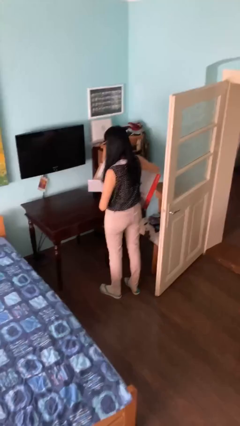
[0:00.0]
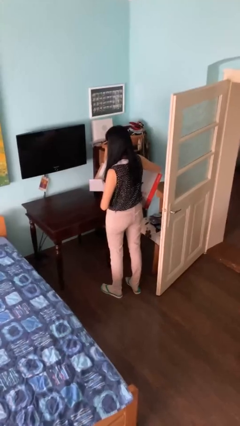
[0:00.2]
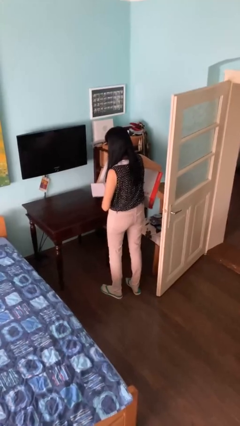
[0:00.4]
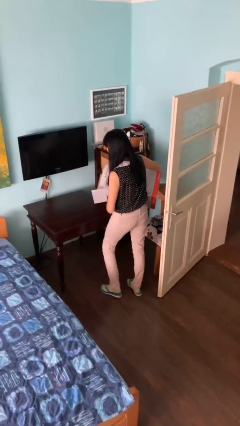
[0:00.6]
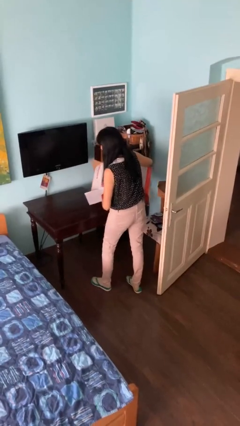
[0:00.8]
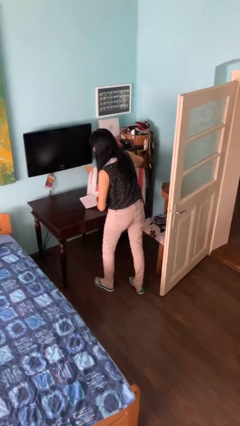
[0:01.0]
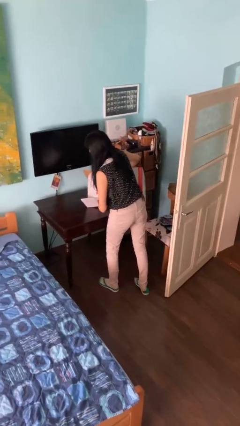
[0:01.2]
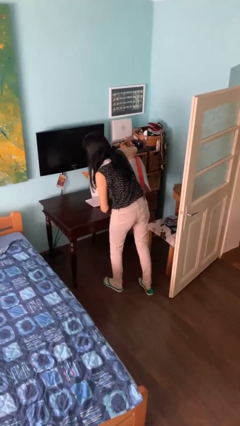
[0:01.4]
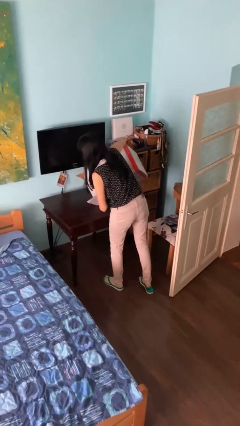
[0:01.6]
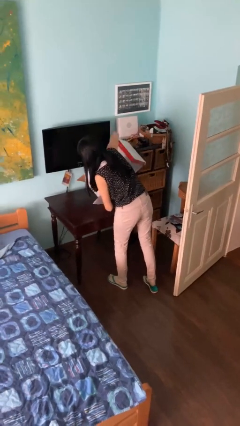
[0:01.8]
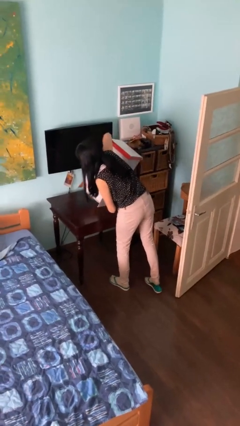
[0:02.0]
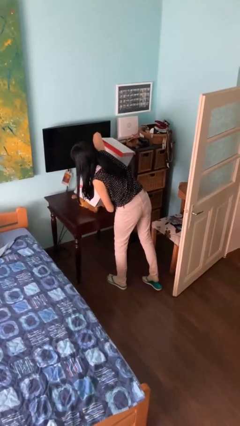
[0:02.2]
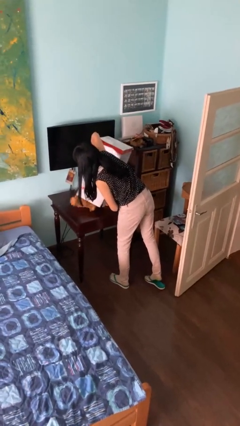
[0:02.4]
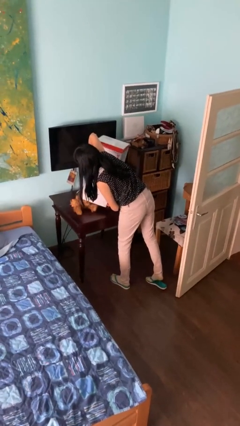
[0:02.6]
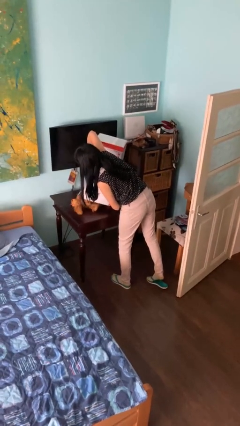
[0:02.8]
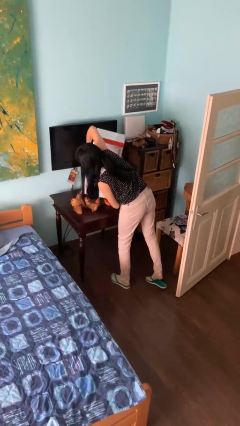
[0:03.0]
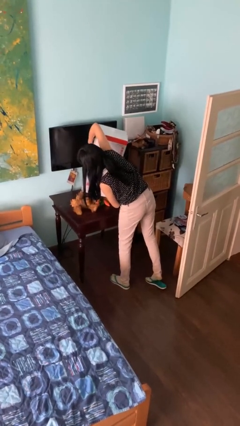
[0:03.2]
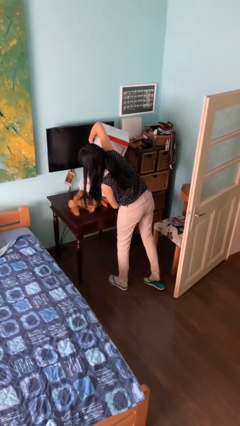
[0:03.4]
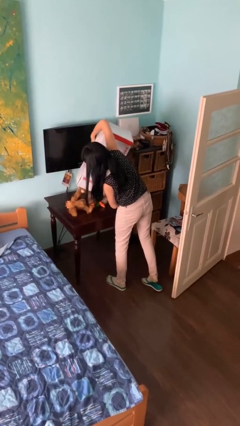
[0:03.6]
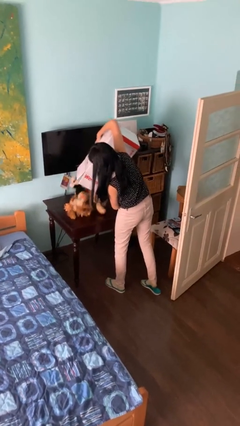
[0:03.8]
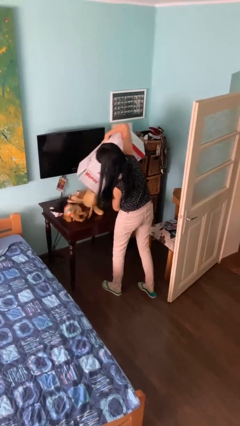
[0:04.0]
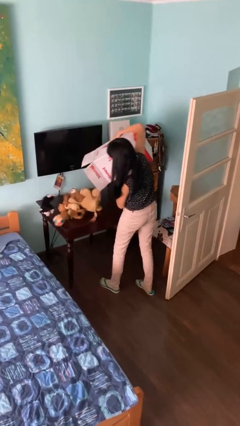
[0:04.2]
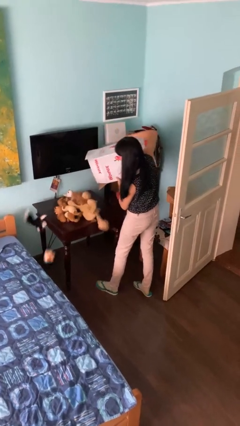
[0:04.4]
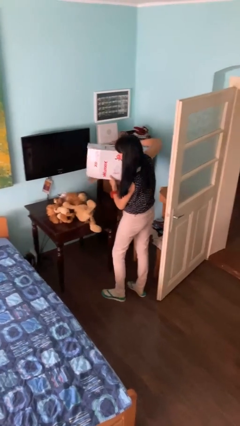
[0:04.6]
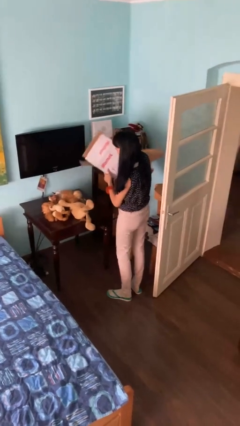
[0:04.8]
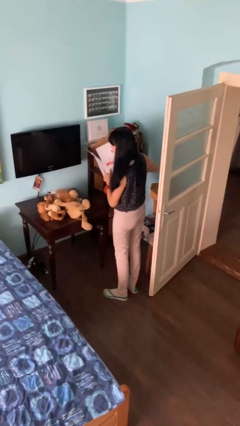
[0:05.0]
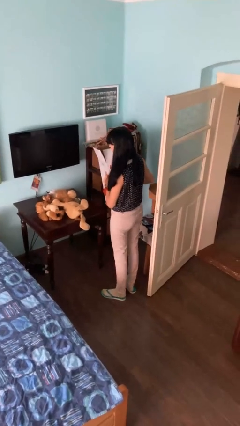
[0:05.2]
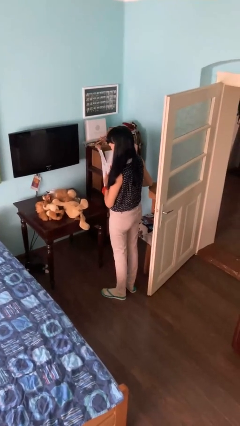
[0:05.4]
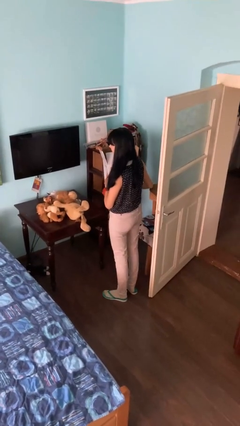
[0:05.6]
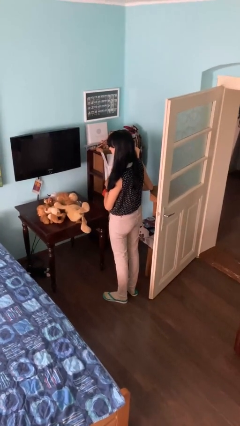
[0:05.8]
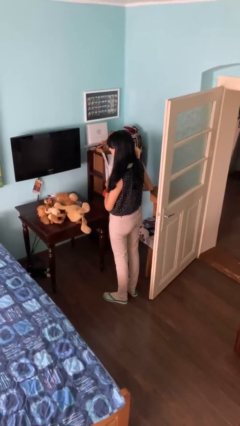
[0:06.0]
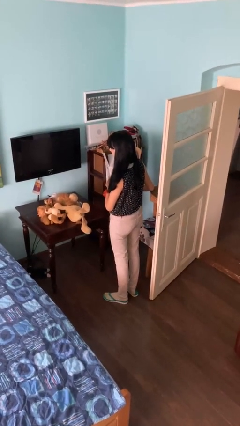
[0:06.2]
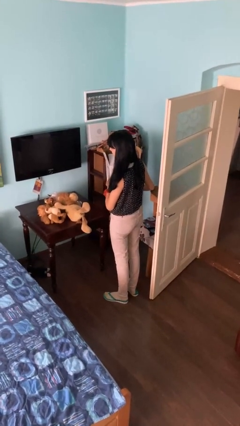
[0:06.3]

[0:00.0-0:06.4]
person unloads box onto table

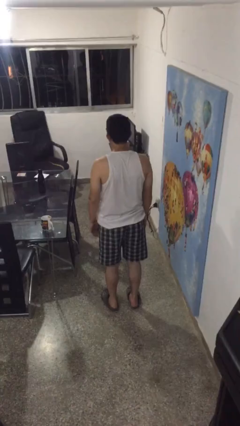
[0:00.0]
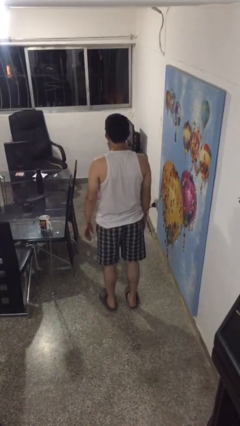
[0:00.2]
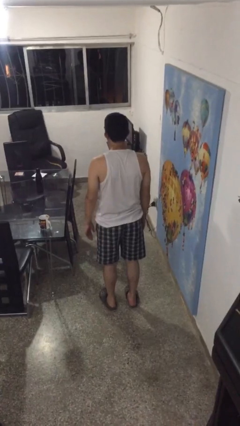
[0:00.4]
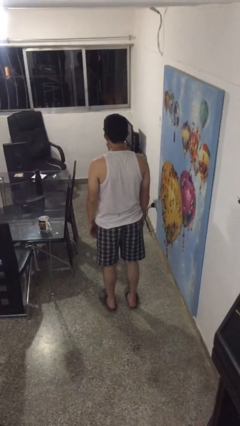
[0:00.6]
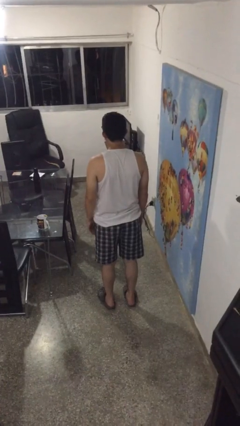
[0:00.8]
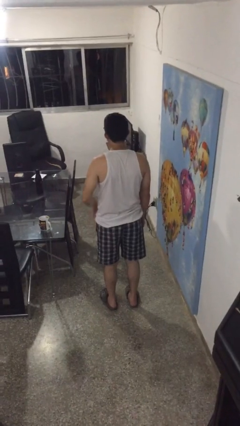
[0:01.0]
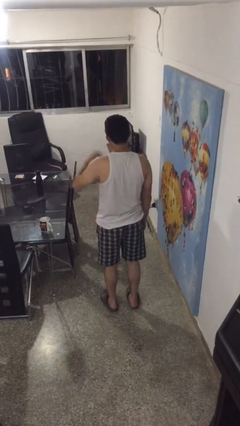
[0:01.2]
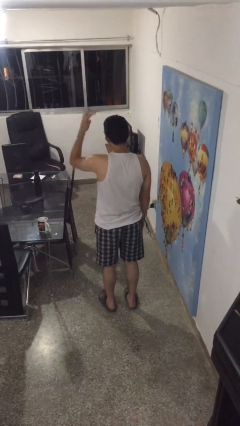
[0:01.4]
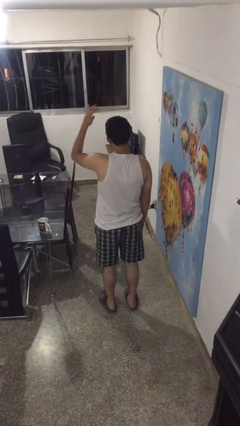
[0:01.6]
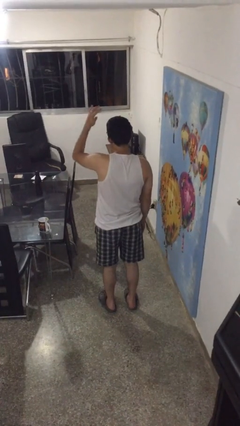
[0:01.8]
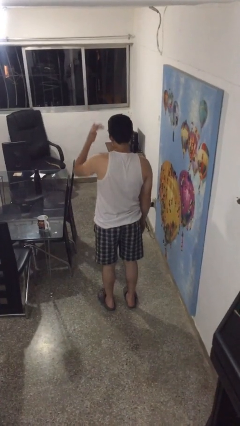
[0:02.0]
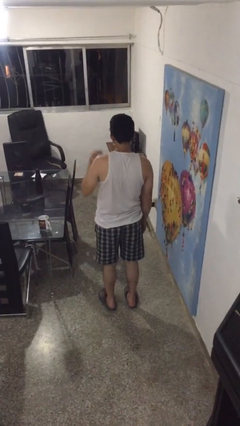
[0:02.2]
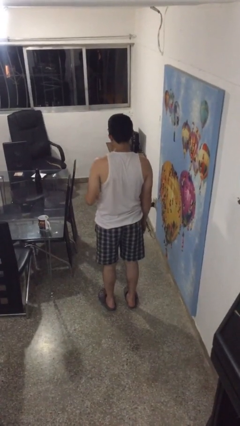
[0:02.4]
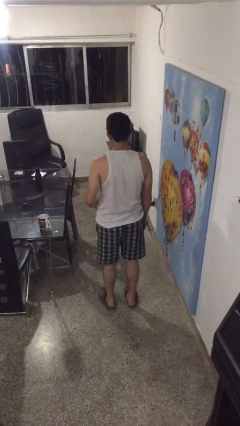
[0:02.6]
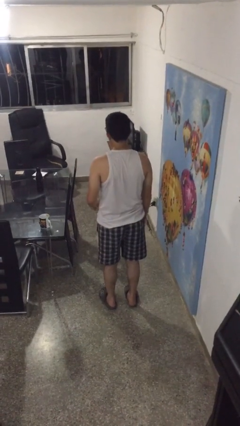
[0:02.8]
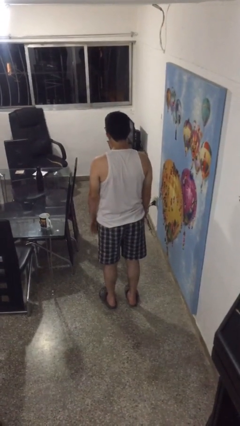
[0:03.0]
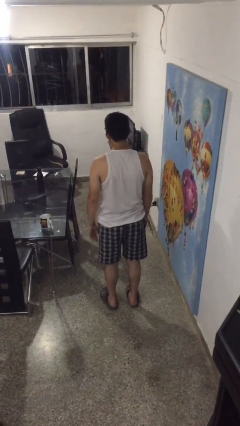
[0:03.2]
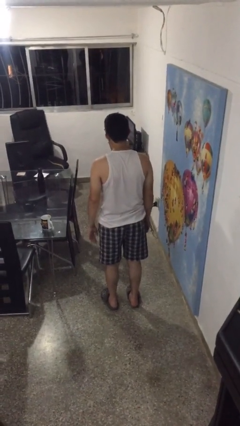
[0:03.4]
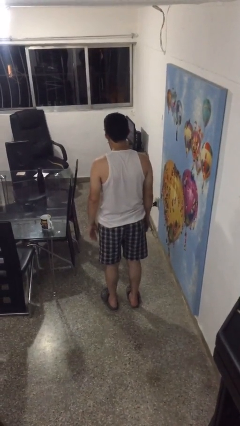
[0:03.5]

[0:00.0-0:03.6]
person gestures swipe down

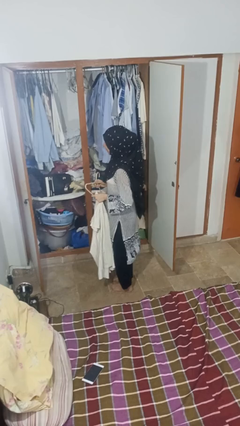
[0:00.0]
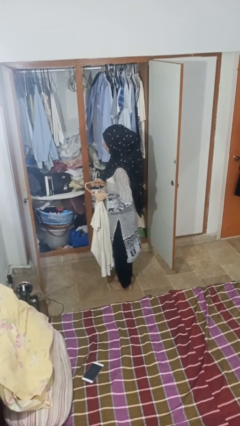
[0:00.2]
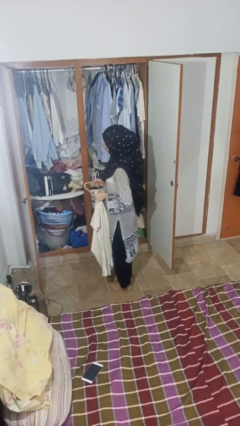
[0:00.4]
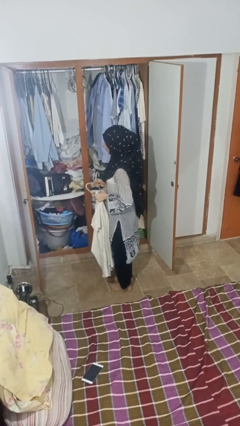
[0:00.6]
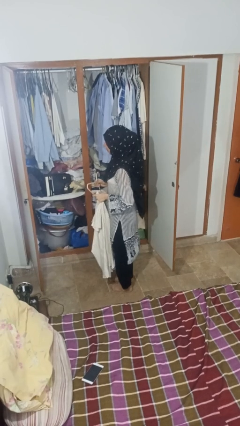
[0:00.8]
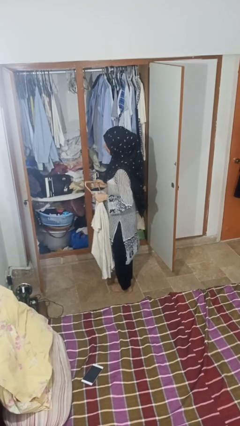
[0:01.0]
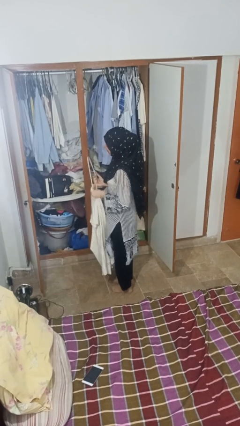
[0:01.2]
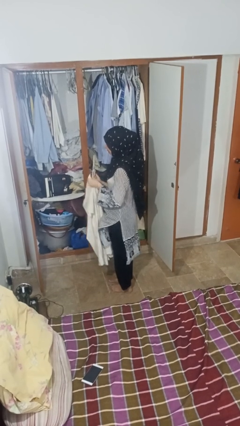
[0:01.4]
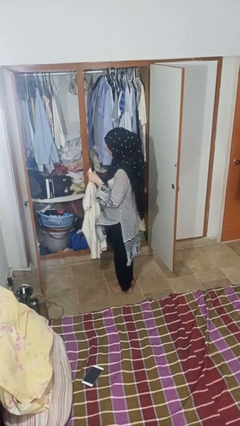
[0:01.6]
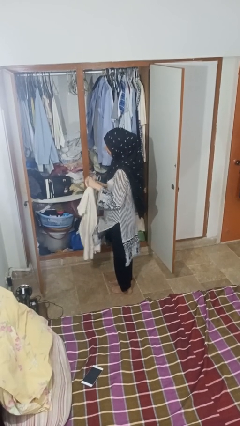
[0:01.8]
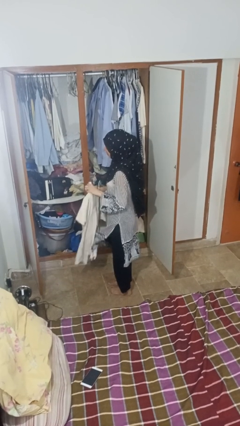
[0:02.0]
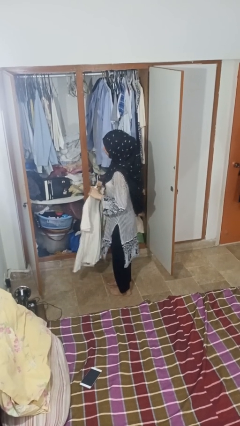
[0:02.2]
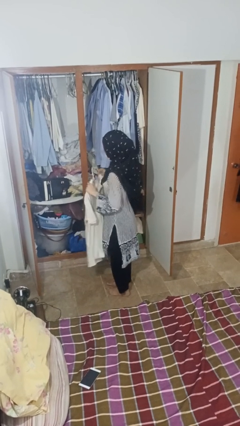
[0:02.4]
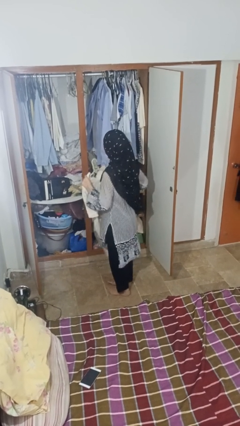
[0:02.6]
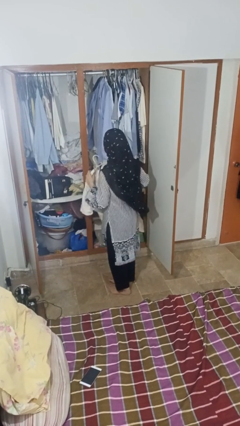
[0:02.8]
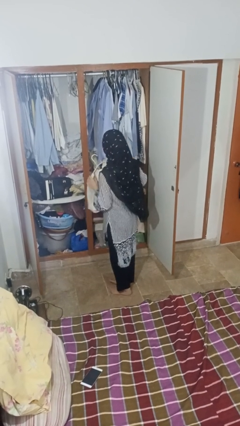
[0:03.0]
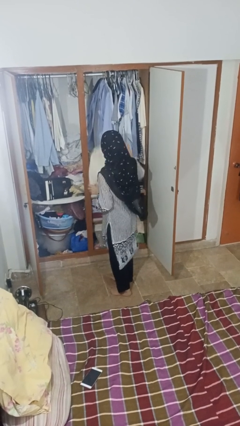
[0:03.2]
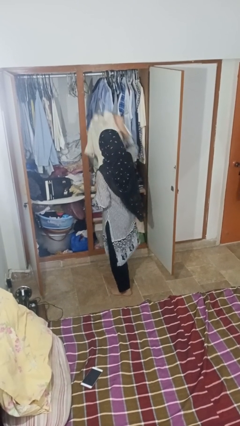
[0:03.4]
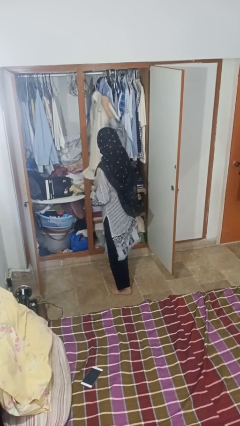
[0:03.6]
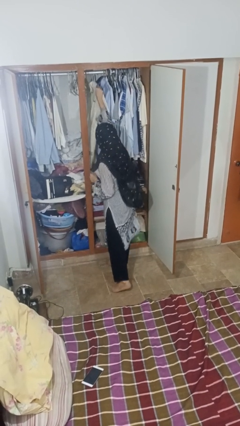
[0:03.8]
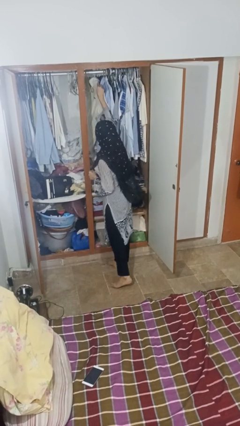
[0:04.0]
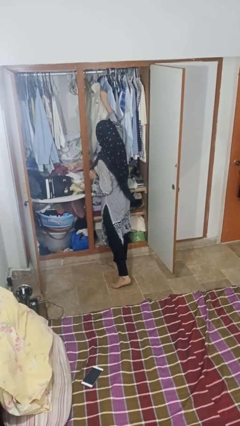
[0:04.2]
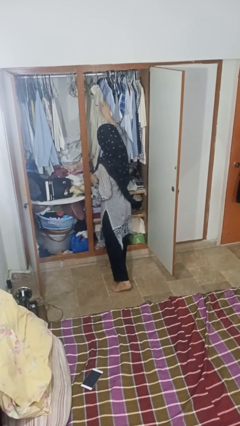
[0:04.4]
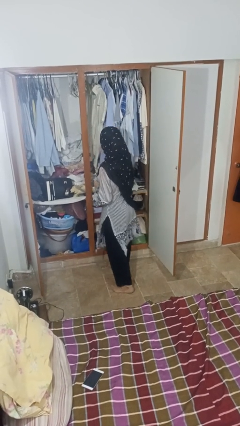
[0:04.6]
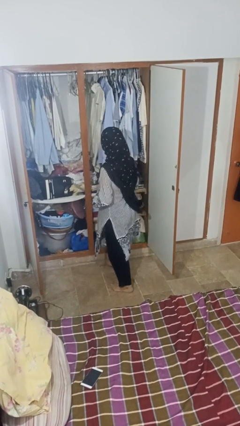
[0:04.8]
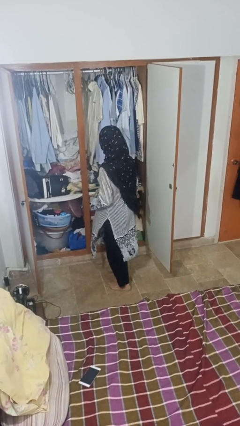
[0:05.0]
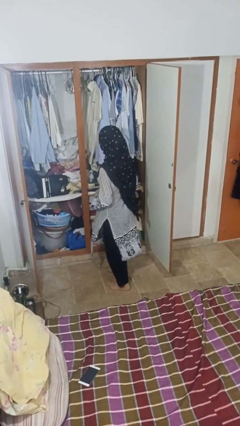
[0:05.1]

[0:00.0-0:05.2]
person puts clothes into closet

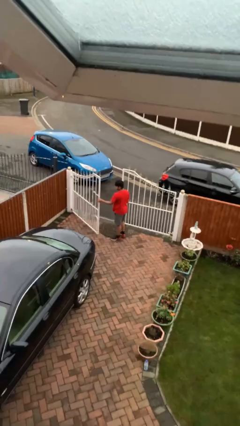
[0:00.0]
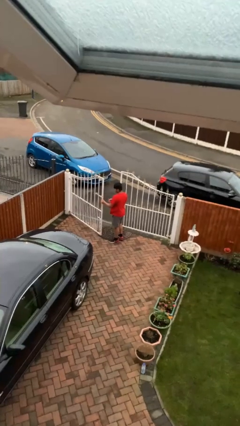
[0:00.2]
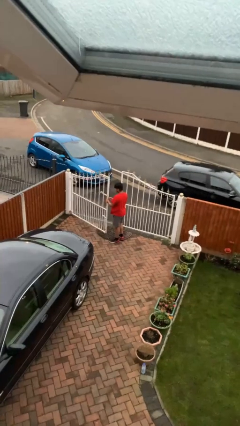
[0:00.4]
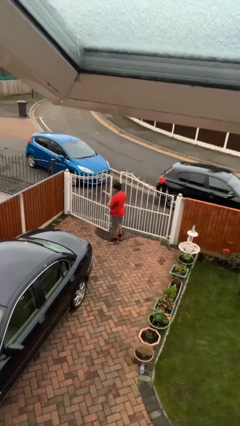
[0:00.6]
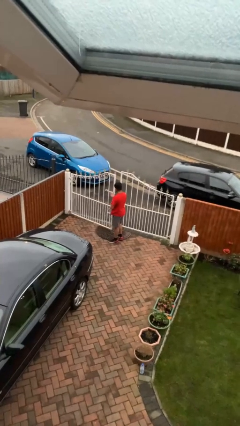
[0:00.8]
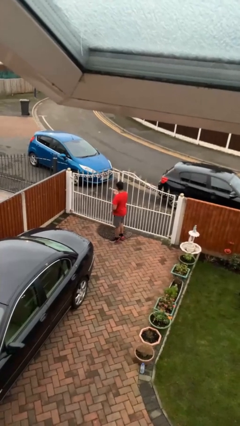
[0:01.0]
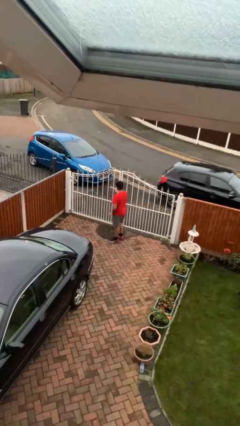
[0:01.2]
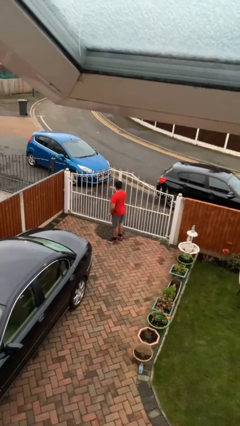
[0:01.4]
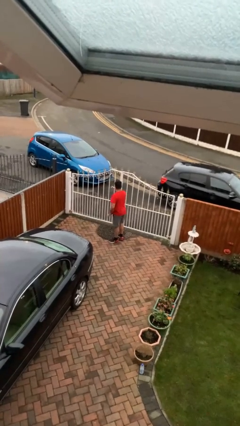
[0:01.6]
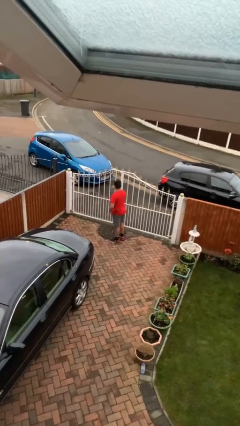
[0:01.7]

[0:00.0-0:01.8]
person closes facility door

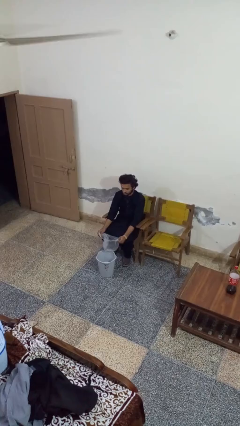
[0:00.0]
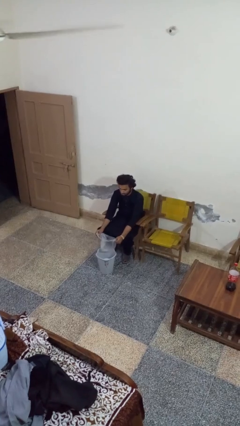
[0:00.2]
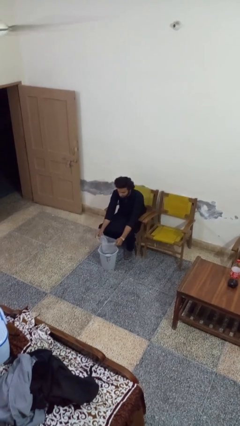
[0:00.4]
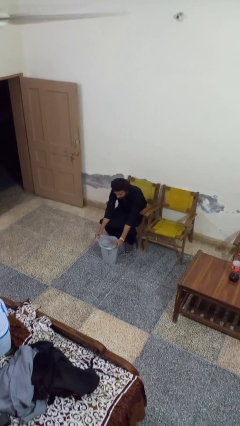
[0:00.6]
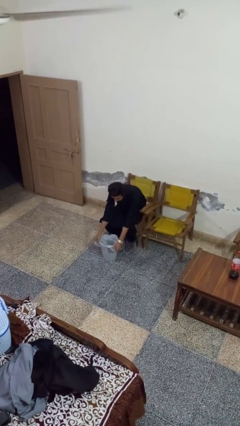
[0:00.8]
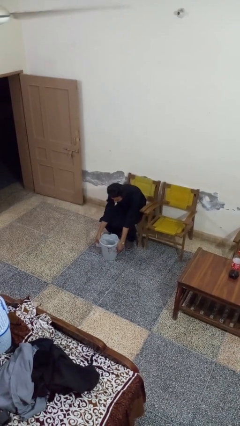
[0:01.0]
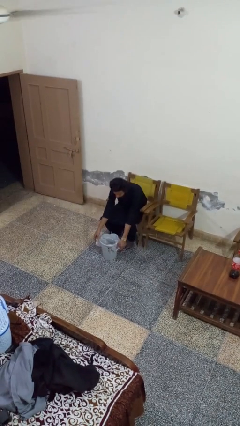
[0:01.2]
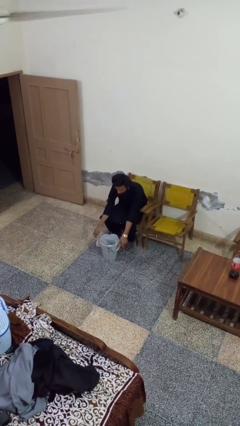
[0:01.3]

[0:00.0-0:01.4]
person inserts trashbag into trashcan
